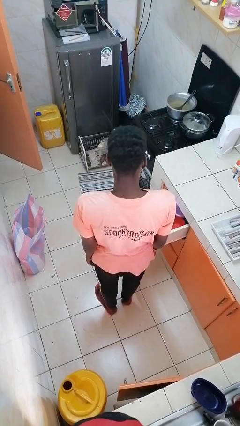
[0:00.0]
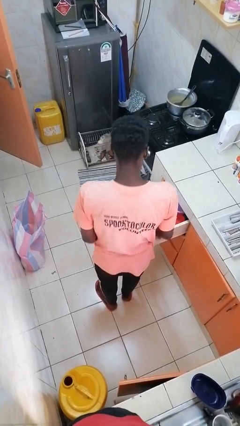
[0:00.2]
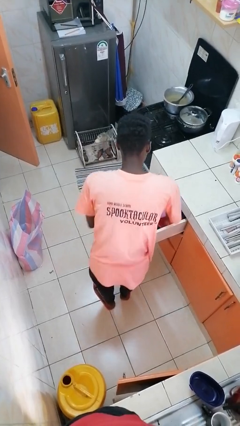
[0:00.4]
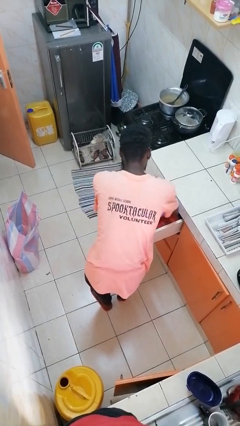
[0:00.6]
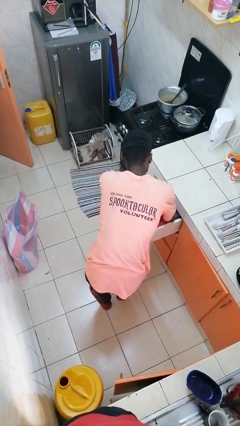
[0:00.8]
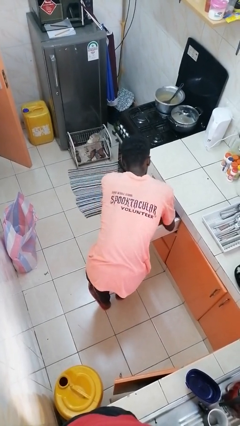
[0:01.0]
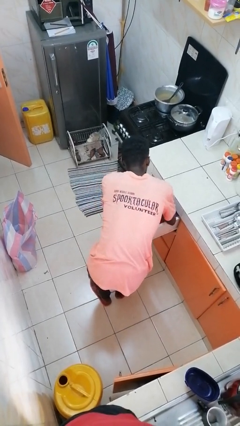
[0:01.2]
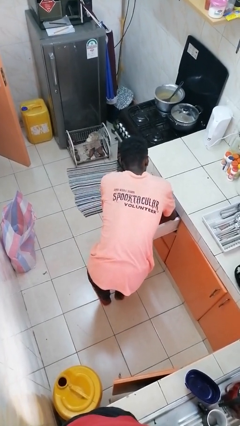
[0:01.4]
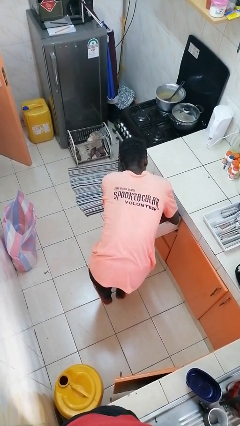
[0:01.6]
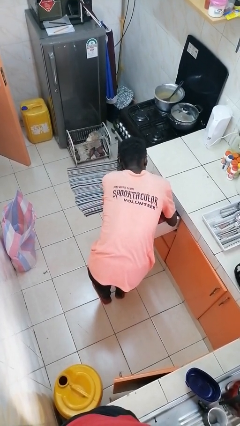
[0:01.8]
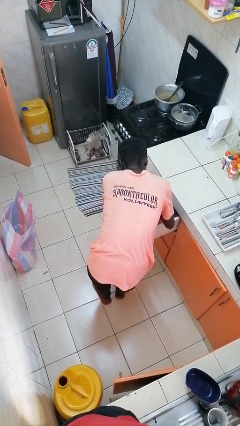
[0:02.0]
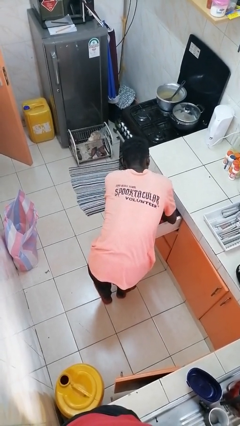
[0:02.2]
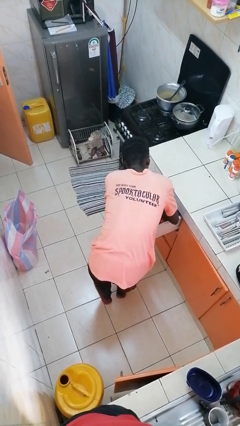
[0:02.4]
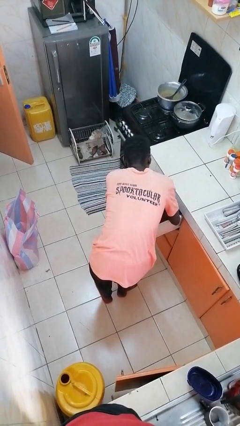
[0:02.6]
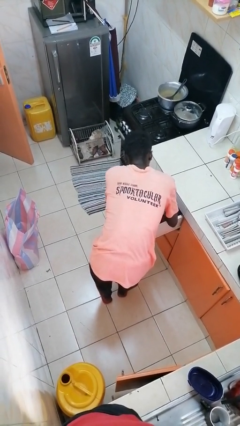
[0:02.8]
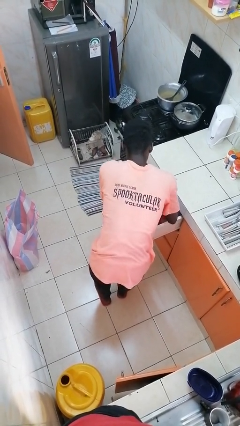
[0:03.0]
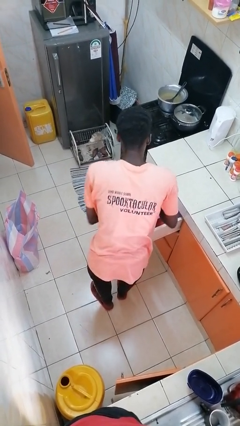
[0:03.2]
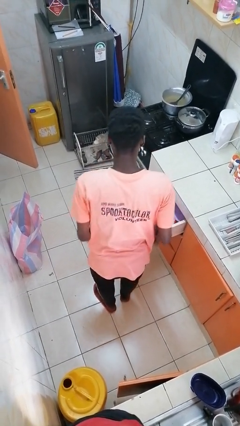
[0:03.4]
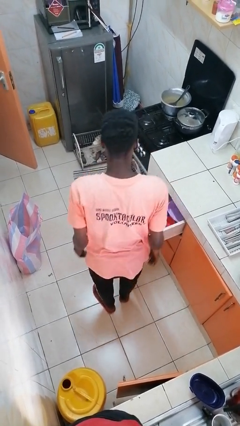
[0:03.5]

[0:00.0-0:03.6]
person searches in kitchen drawer

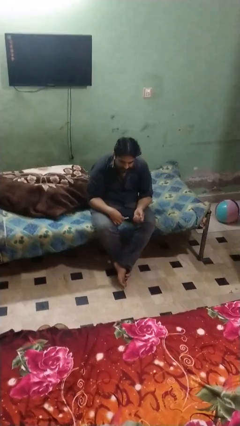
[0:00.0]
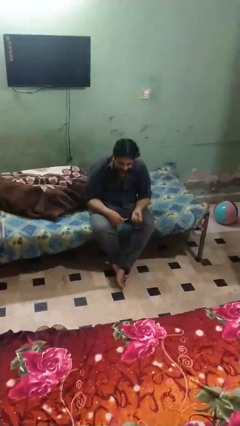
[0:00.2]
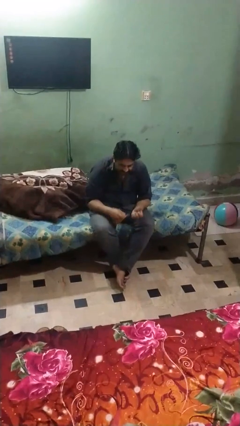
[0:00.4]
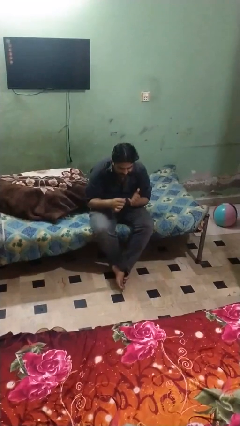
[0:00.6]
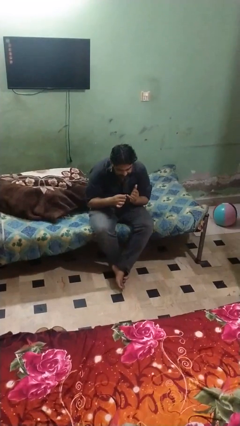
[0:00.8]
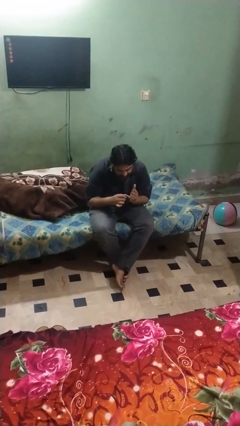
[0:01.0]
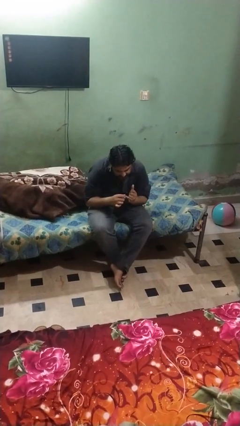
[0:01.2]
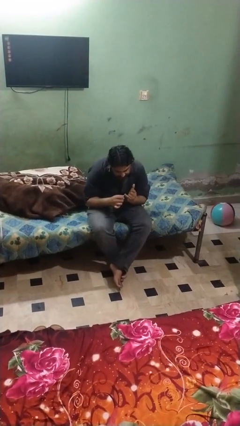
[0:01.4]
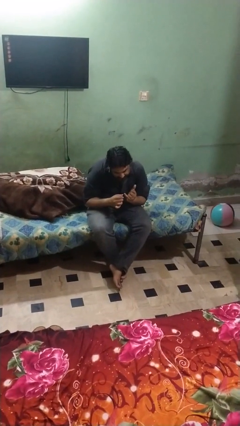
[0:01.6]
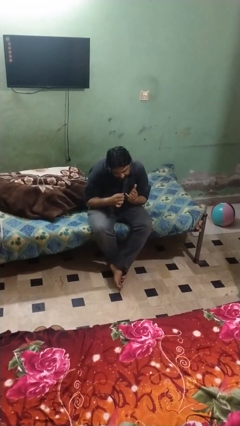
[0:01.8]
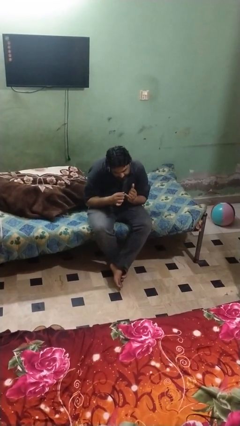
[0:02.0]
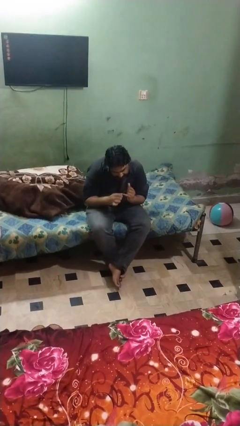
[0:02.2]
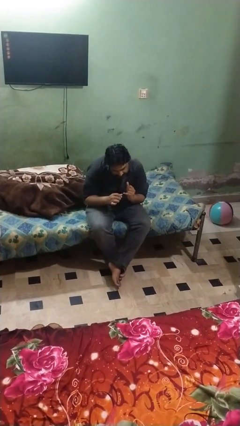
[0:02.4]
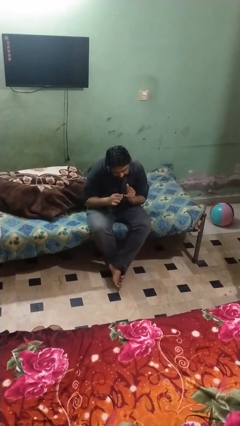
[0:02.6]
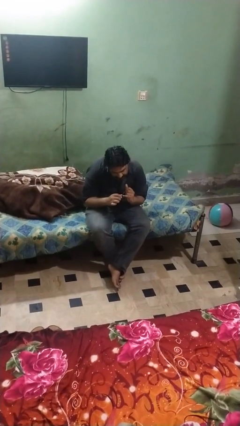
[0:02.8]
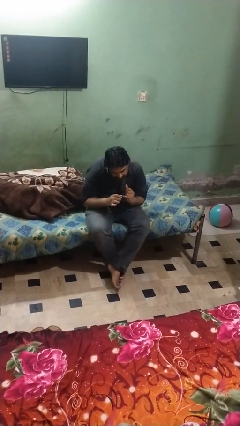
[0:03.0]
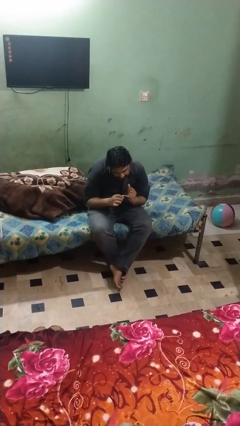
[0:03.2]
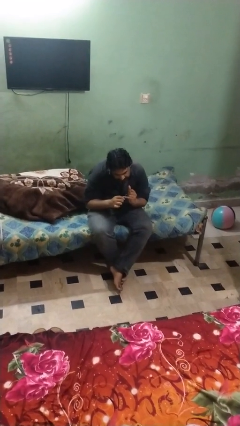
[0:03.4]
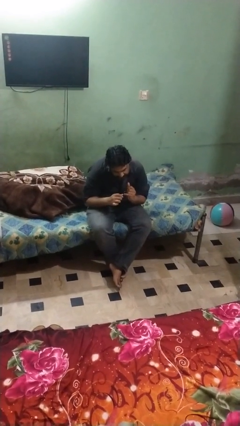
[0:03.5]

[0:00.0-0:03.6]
person files fingernails

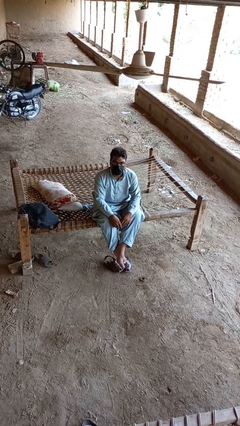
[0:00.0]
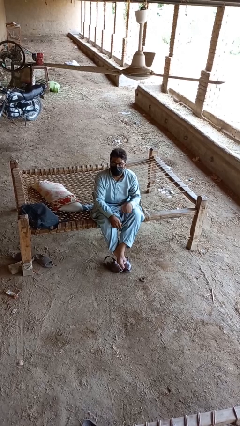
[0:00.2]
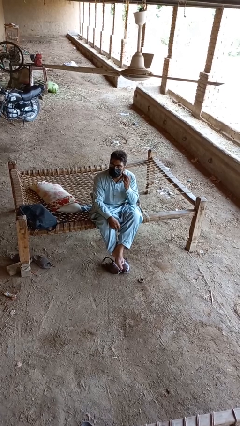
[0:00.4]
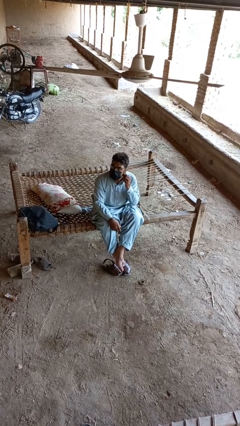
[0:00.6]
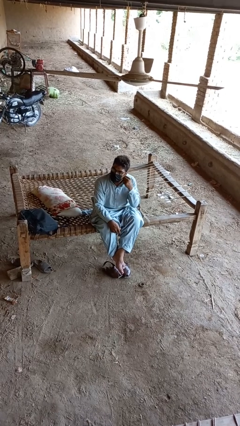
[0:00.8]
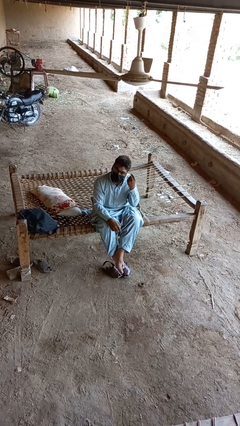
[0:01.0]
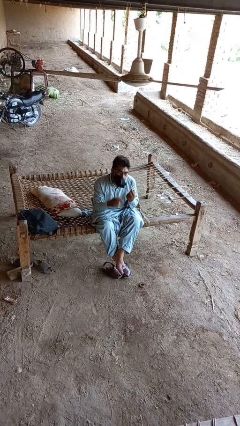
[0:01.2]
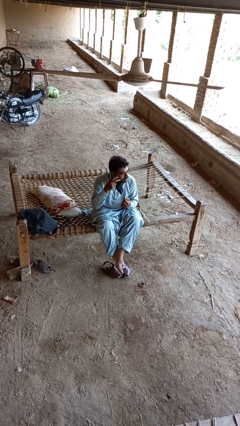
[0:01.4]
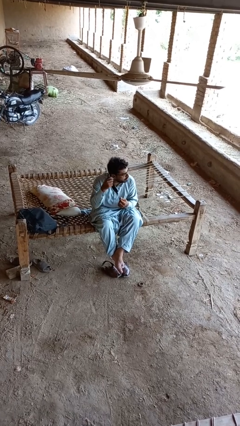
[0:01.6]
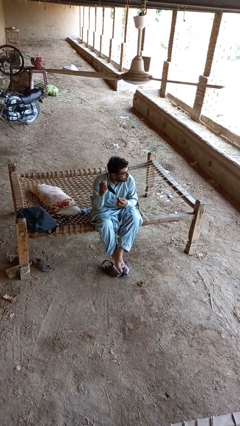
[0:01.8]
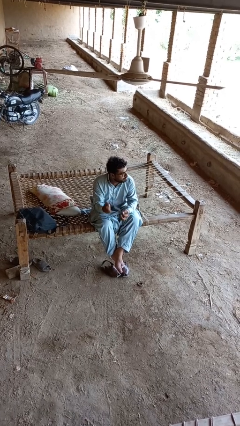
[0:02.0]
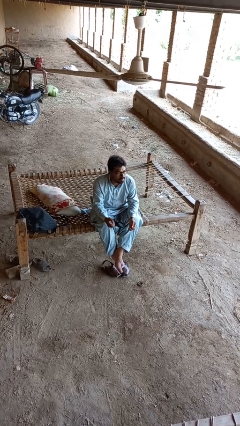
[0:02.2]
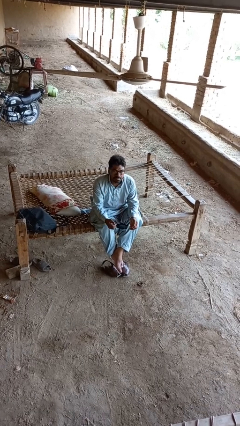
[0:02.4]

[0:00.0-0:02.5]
person takes off facemask

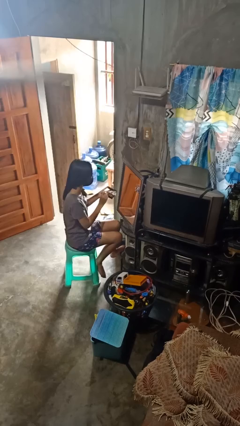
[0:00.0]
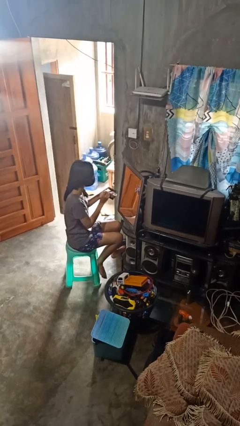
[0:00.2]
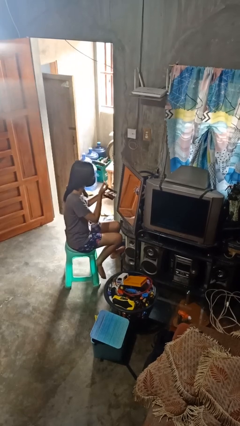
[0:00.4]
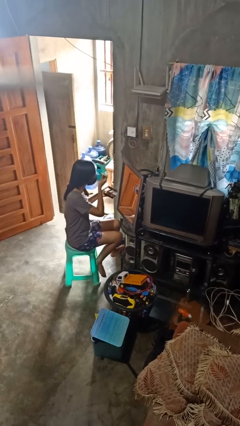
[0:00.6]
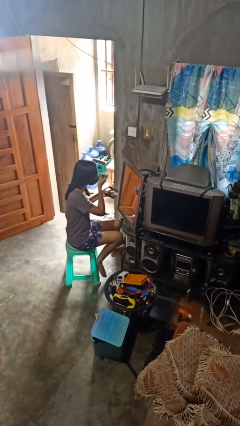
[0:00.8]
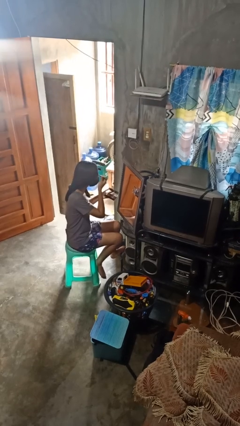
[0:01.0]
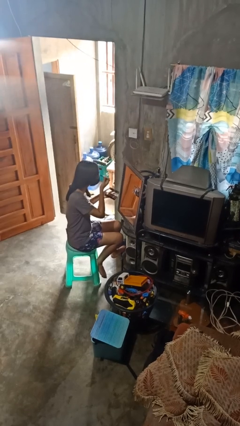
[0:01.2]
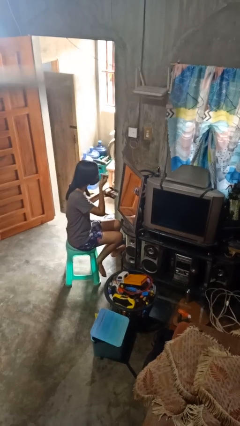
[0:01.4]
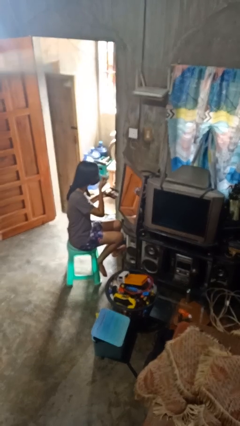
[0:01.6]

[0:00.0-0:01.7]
person applies eye makeup

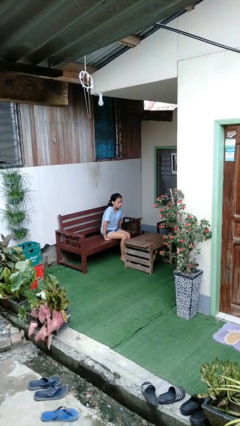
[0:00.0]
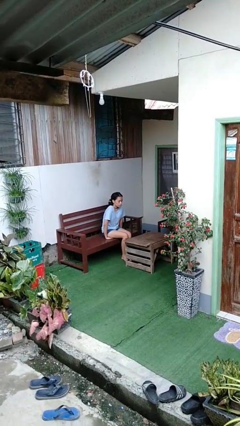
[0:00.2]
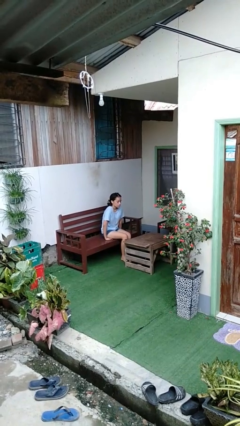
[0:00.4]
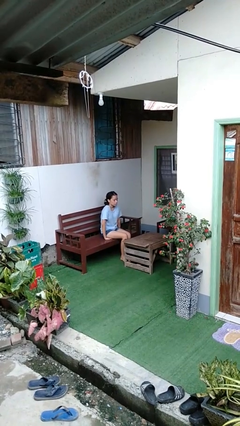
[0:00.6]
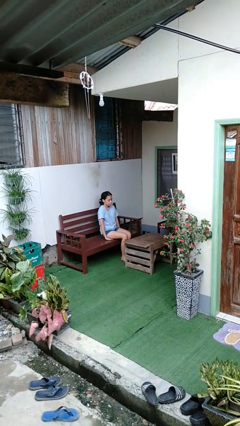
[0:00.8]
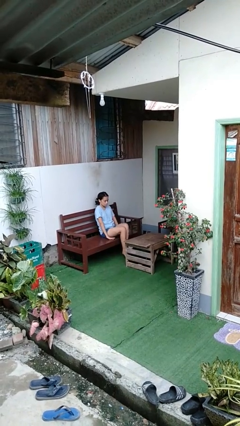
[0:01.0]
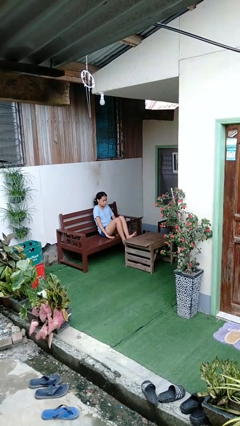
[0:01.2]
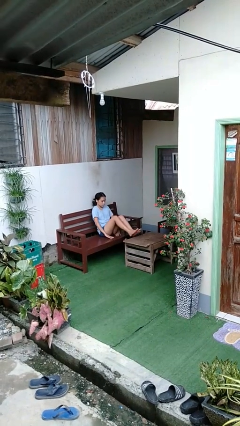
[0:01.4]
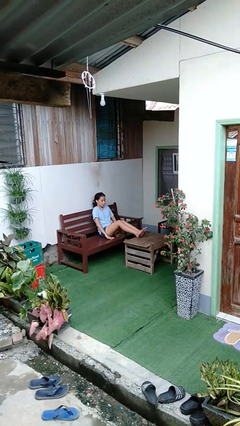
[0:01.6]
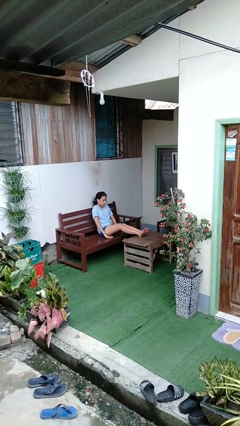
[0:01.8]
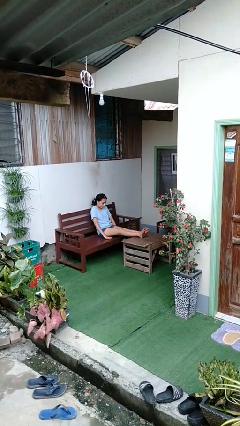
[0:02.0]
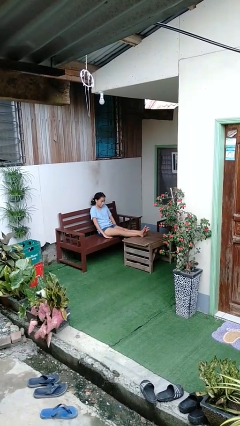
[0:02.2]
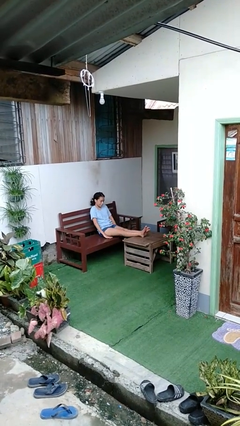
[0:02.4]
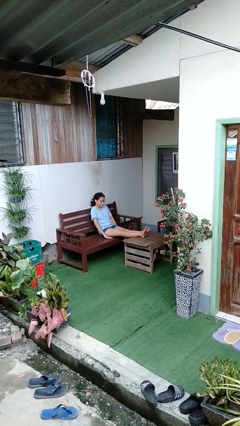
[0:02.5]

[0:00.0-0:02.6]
person puts feet up

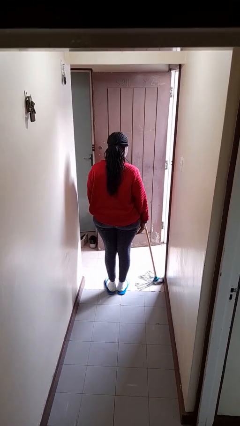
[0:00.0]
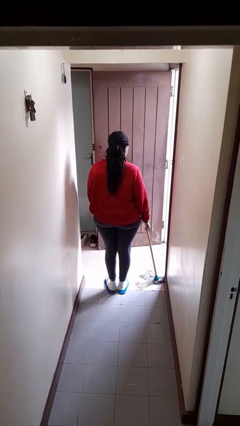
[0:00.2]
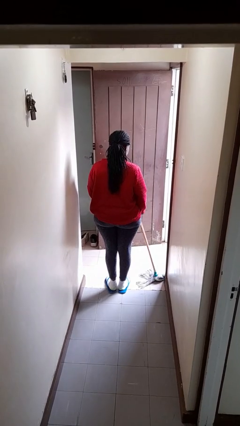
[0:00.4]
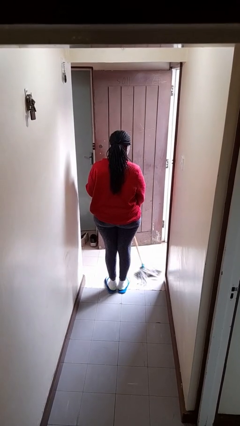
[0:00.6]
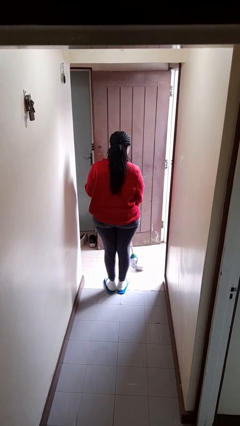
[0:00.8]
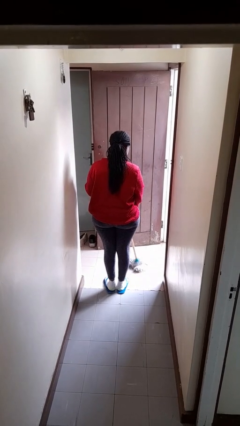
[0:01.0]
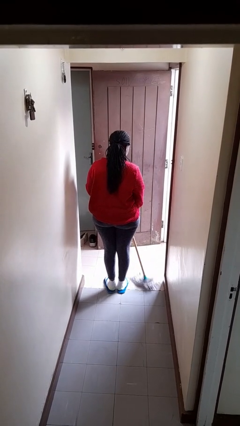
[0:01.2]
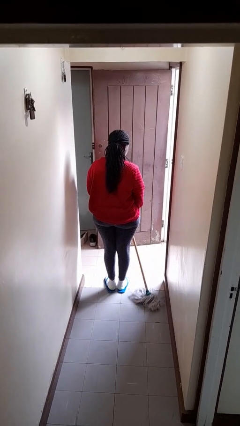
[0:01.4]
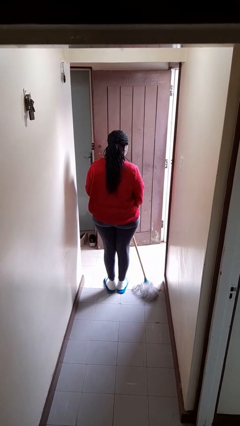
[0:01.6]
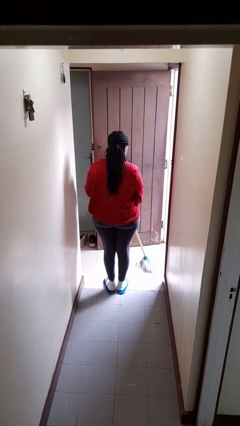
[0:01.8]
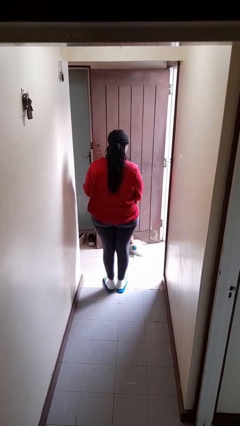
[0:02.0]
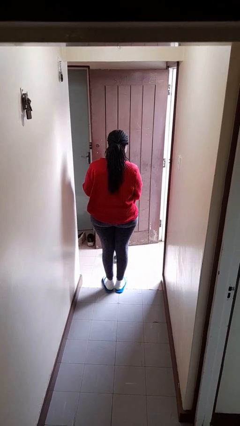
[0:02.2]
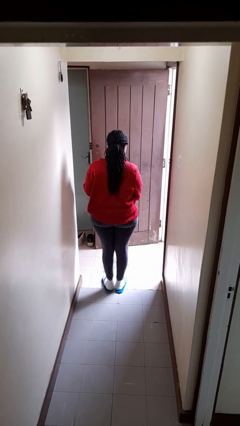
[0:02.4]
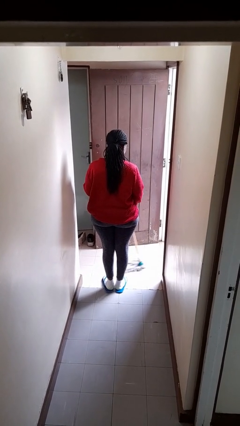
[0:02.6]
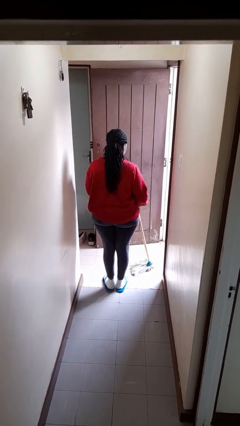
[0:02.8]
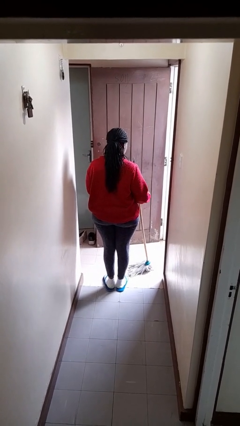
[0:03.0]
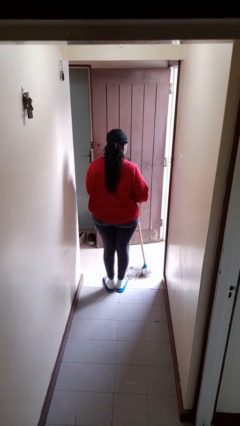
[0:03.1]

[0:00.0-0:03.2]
person mops

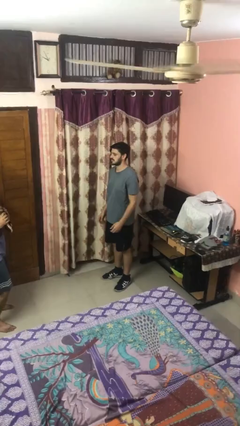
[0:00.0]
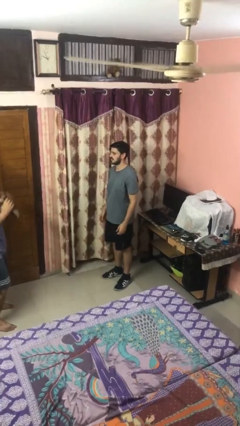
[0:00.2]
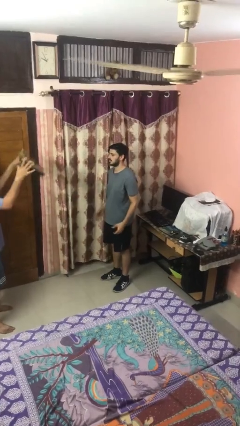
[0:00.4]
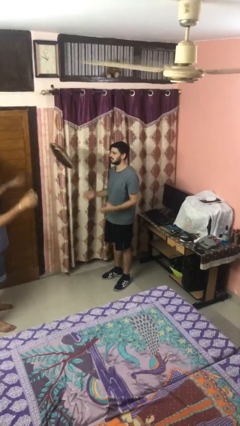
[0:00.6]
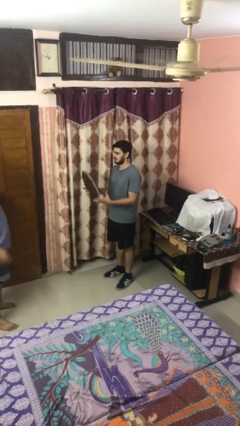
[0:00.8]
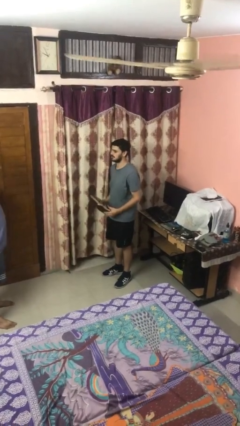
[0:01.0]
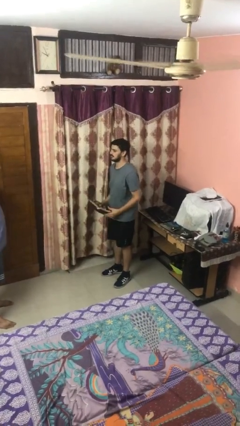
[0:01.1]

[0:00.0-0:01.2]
person catches object from person
